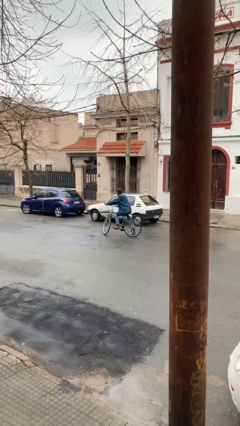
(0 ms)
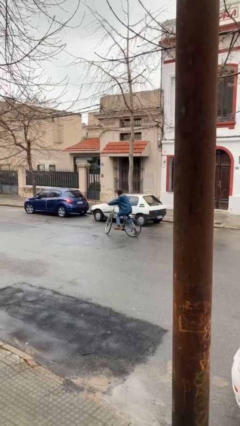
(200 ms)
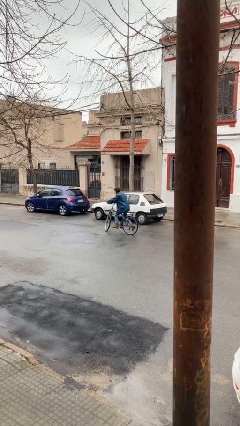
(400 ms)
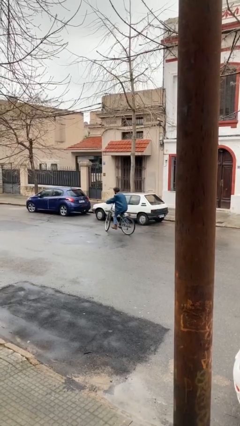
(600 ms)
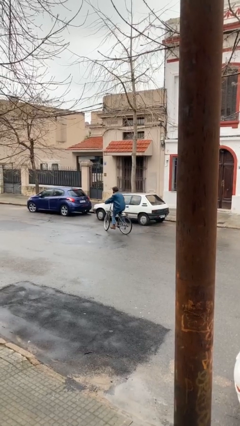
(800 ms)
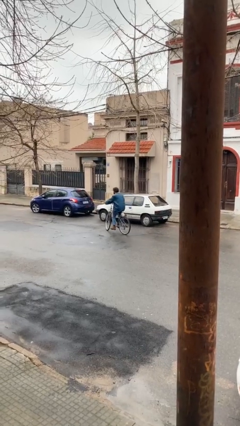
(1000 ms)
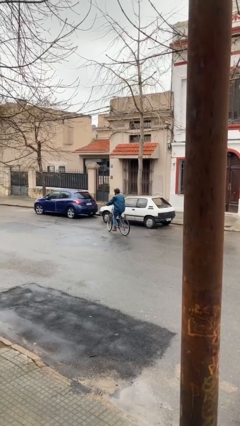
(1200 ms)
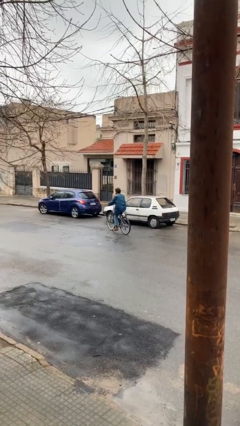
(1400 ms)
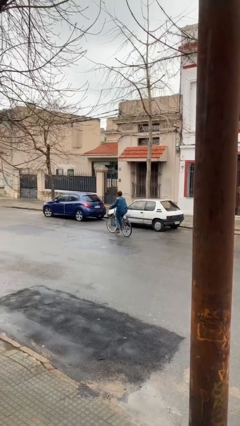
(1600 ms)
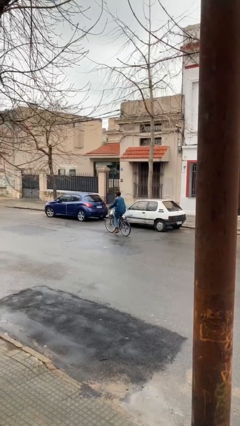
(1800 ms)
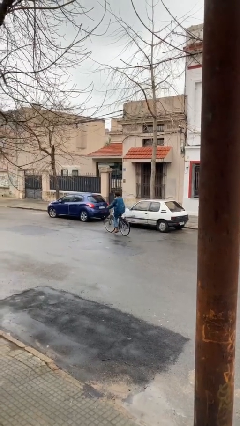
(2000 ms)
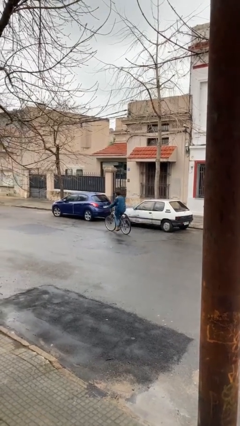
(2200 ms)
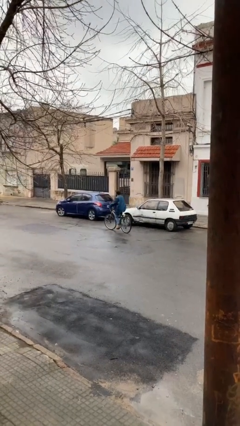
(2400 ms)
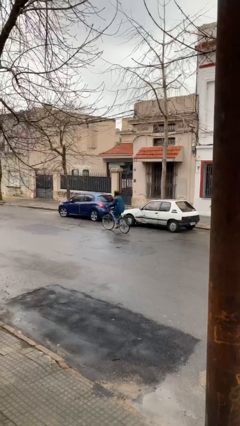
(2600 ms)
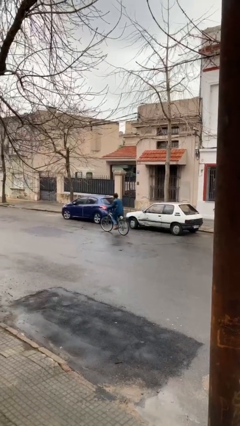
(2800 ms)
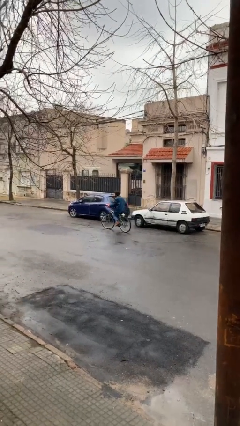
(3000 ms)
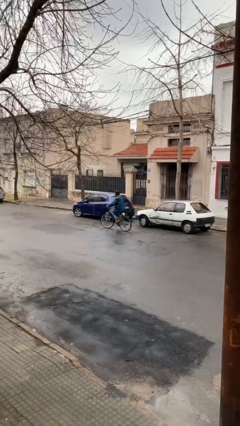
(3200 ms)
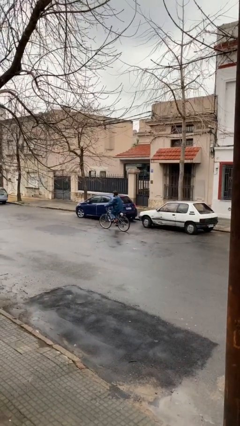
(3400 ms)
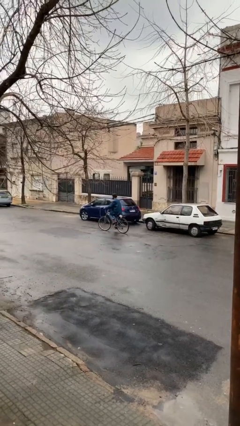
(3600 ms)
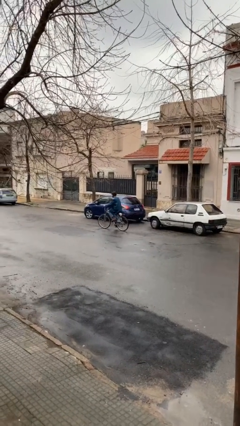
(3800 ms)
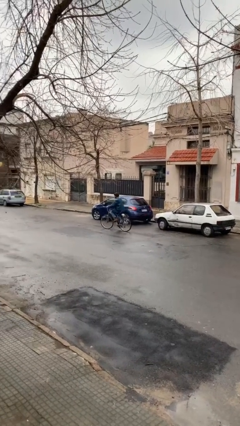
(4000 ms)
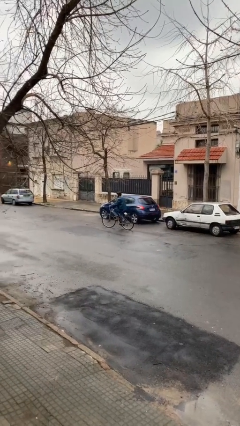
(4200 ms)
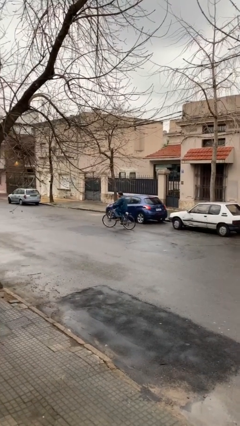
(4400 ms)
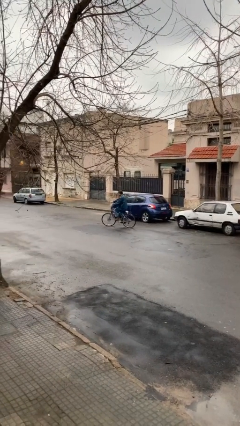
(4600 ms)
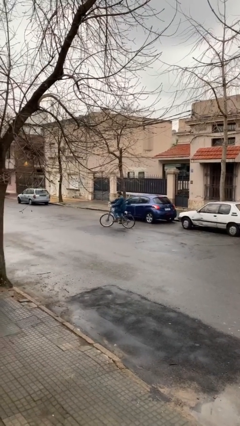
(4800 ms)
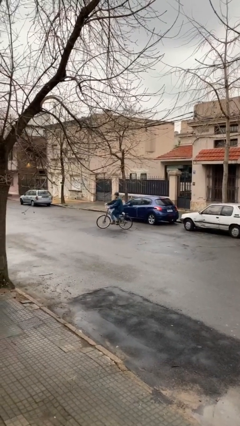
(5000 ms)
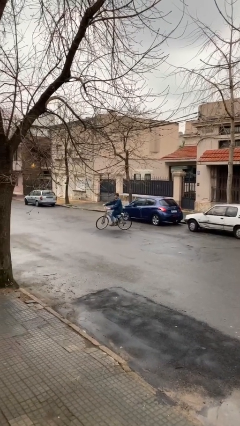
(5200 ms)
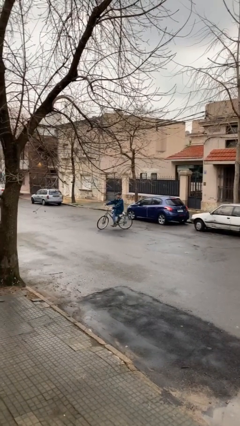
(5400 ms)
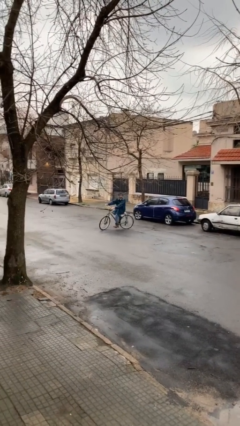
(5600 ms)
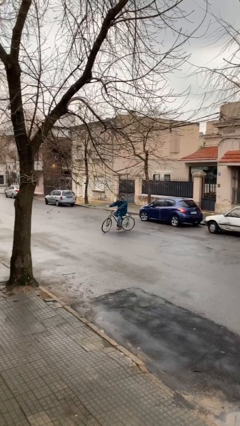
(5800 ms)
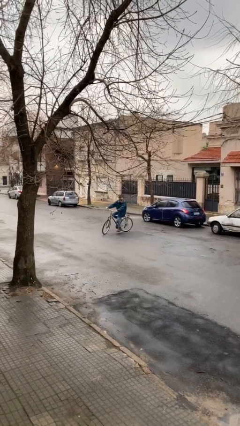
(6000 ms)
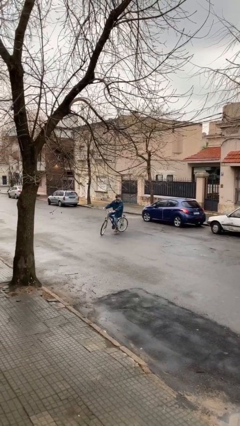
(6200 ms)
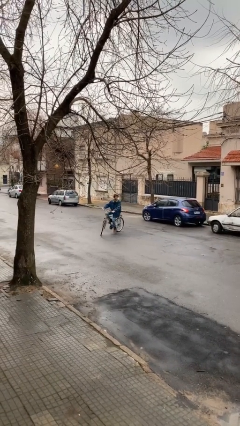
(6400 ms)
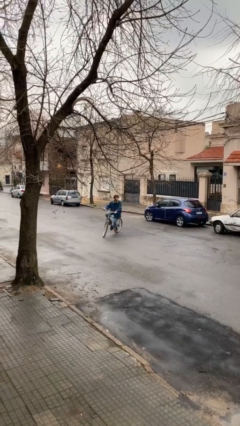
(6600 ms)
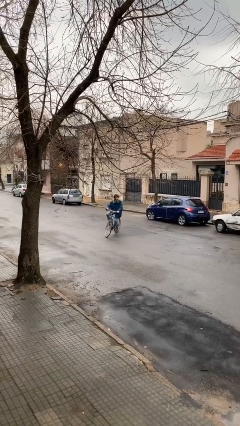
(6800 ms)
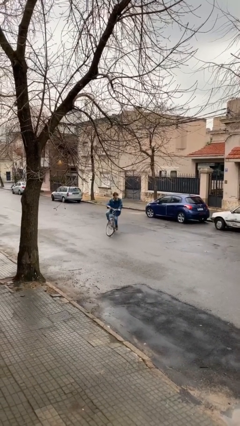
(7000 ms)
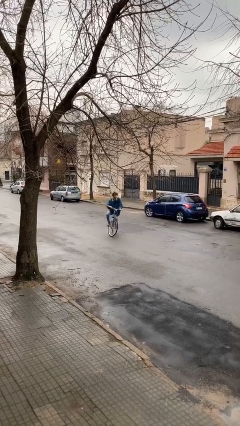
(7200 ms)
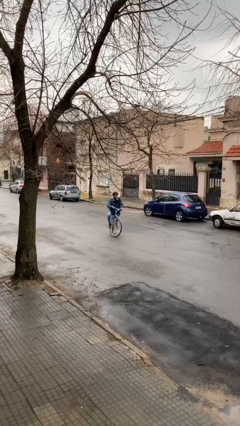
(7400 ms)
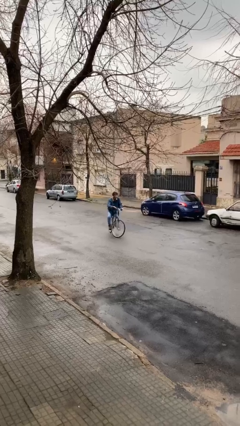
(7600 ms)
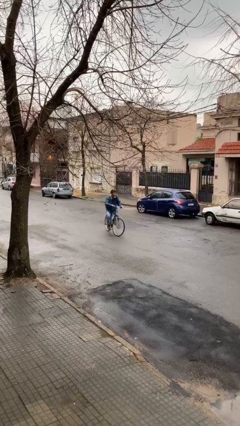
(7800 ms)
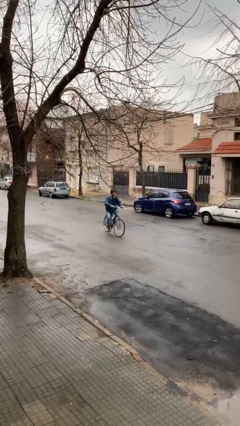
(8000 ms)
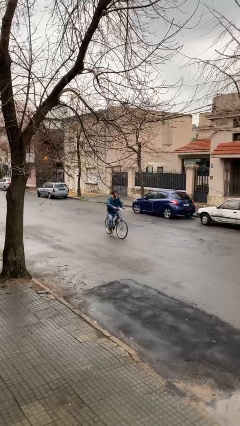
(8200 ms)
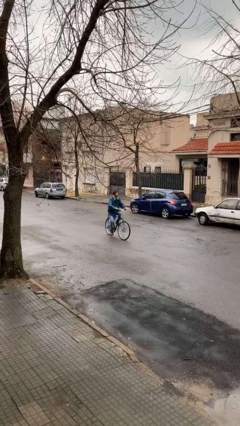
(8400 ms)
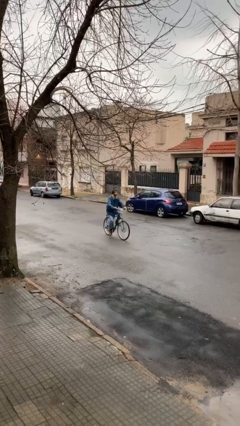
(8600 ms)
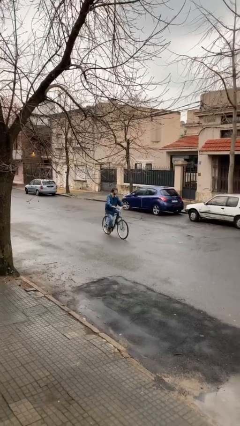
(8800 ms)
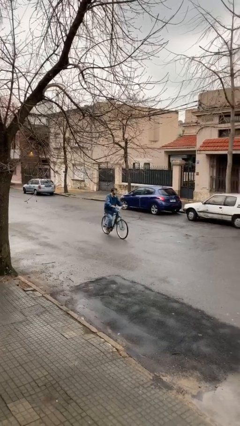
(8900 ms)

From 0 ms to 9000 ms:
person rides bicycle

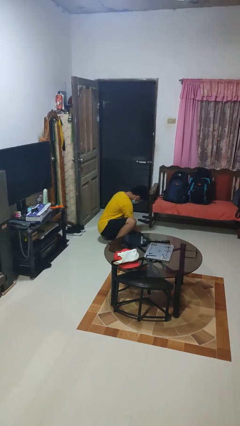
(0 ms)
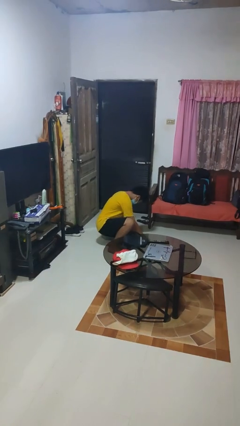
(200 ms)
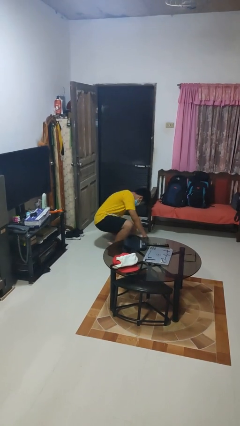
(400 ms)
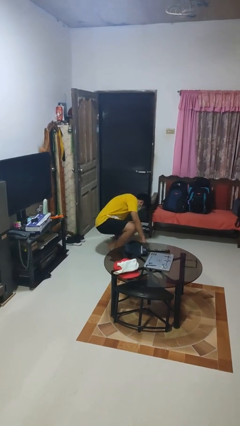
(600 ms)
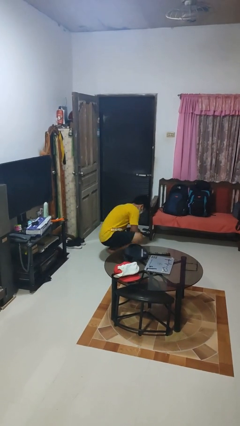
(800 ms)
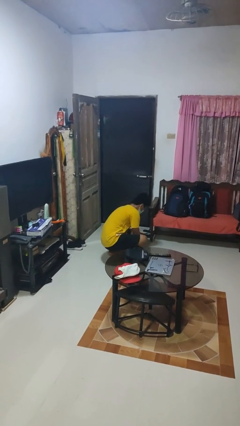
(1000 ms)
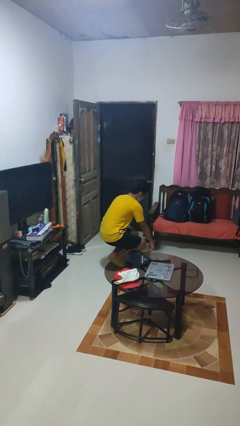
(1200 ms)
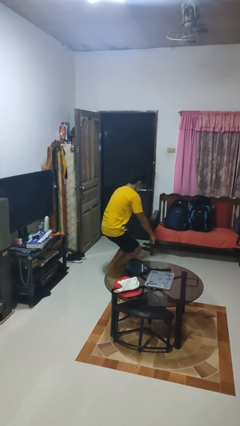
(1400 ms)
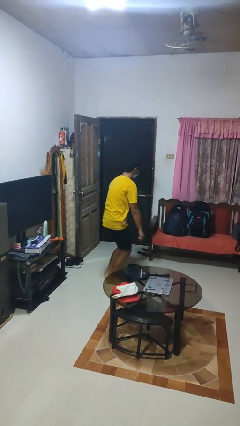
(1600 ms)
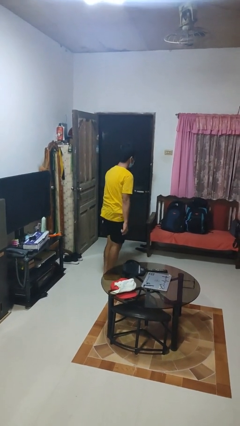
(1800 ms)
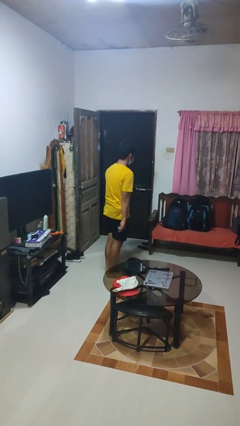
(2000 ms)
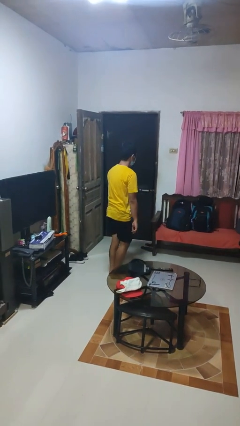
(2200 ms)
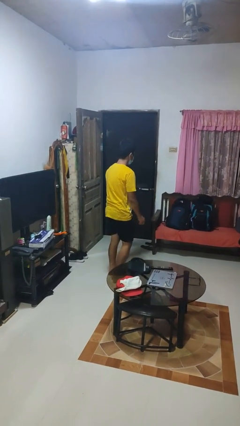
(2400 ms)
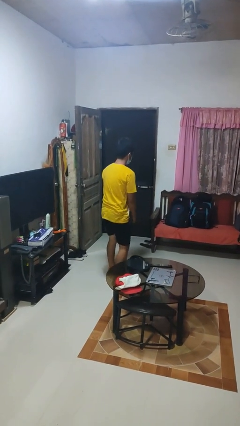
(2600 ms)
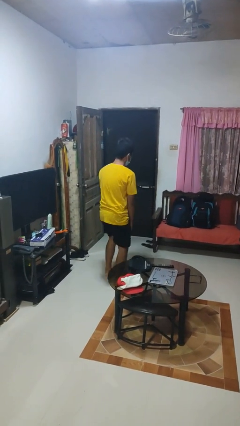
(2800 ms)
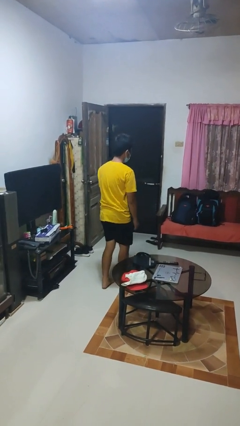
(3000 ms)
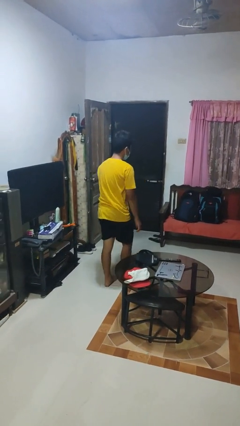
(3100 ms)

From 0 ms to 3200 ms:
person stands up from floor

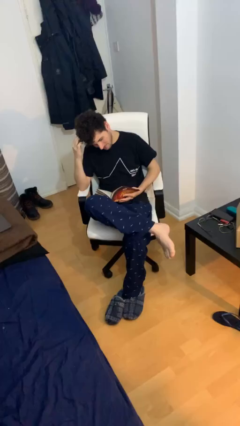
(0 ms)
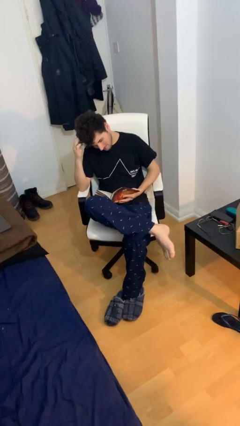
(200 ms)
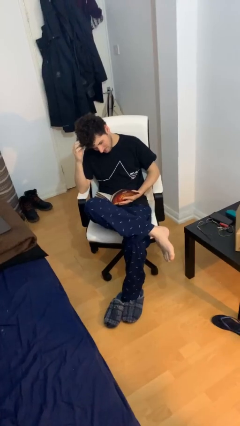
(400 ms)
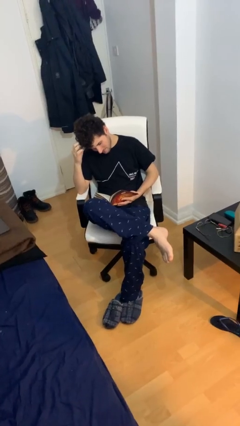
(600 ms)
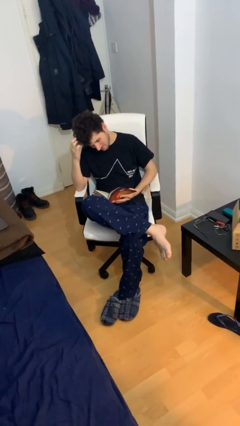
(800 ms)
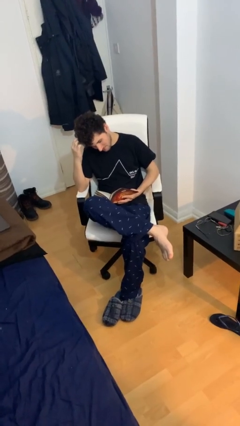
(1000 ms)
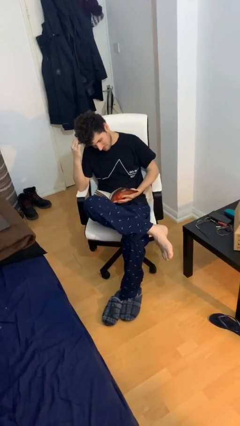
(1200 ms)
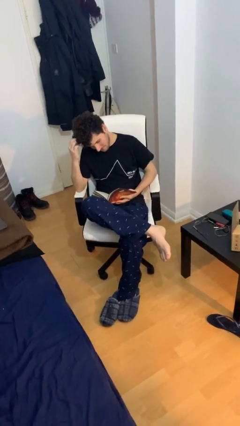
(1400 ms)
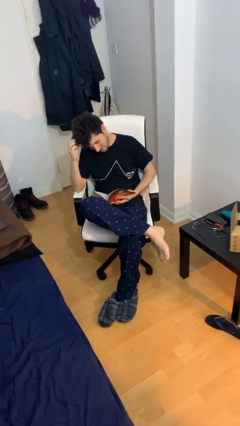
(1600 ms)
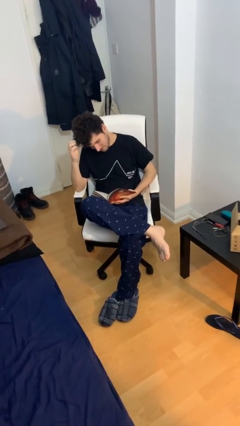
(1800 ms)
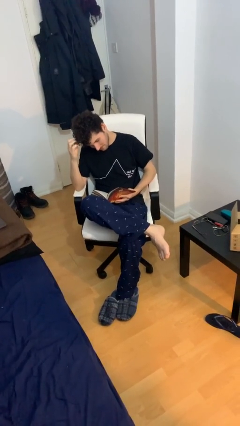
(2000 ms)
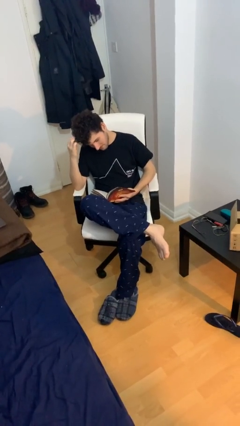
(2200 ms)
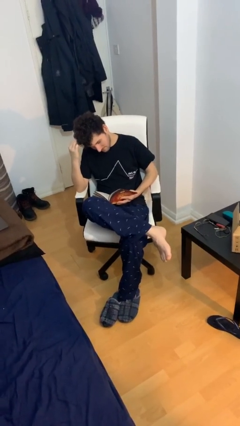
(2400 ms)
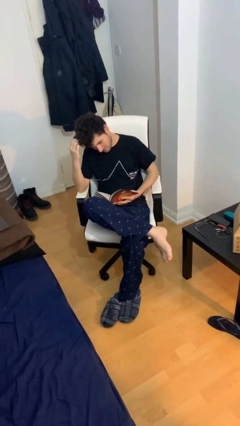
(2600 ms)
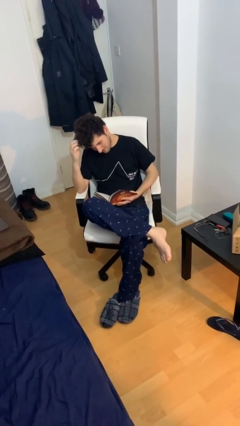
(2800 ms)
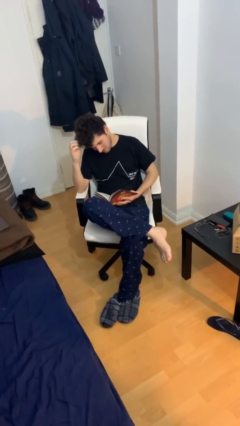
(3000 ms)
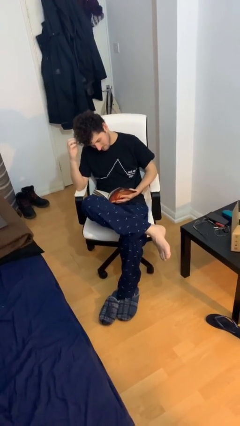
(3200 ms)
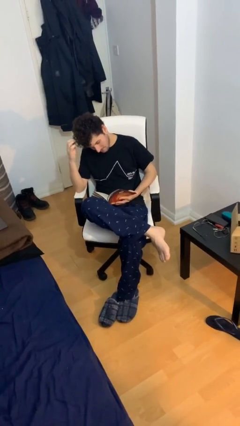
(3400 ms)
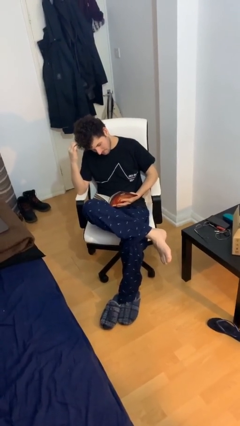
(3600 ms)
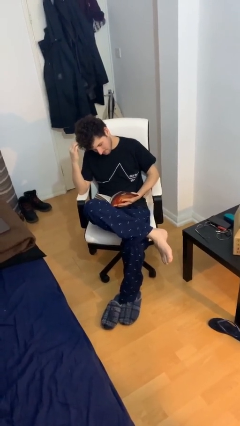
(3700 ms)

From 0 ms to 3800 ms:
person reads document

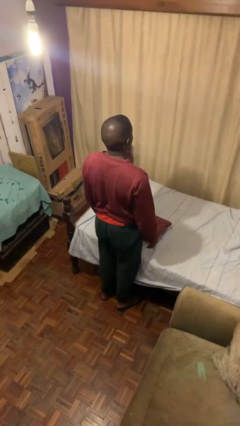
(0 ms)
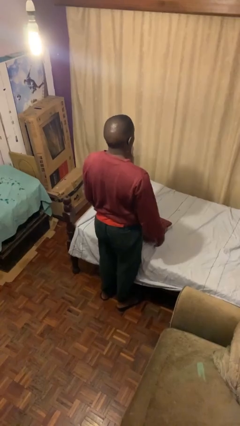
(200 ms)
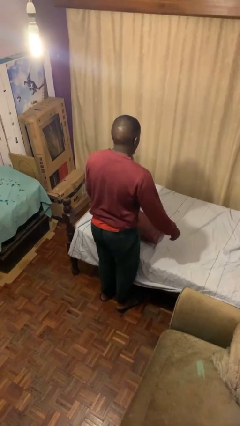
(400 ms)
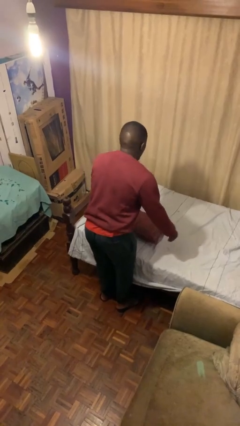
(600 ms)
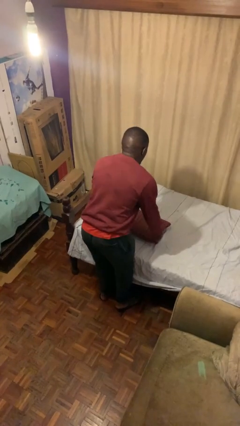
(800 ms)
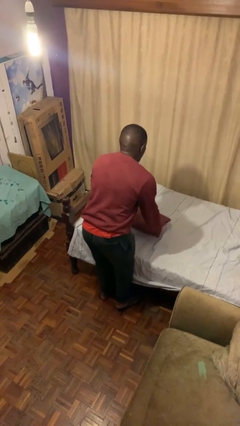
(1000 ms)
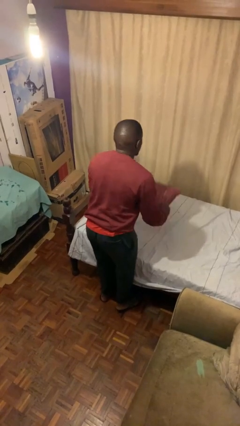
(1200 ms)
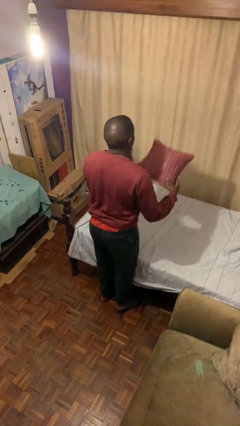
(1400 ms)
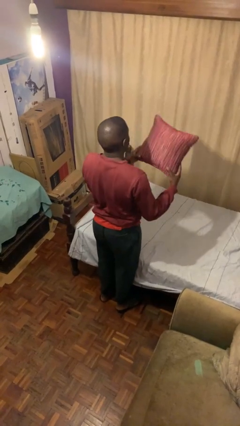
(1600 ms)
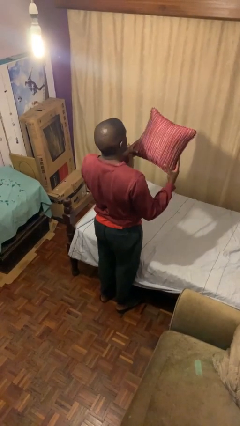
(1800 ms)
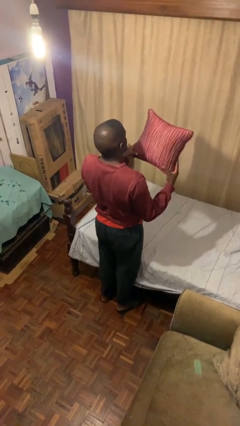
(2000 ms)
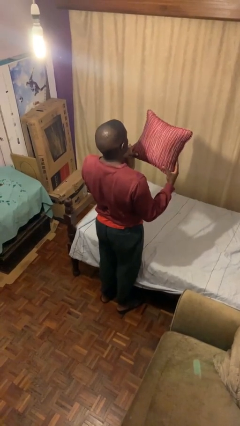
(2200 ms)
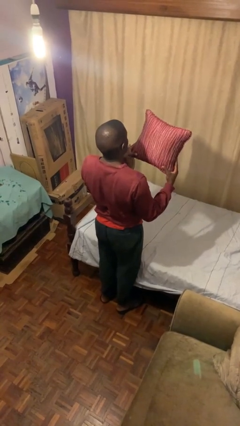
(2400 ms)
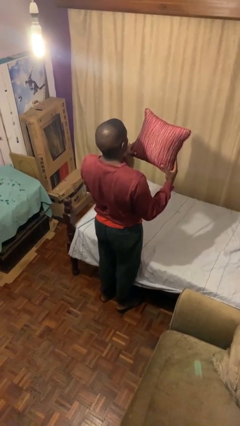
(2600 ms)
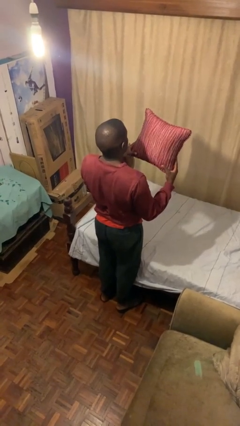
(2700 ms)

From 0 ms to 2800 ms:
person picks up object from bed
